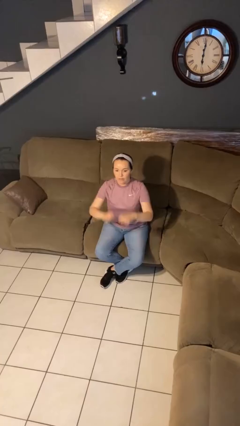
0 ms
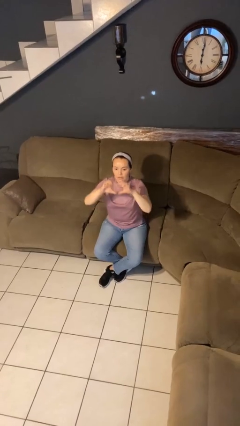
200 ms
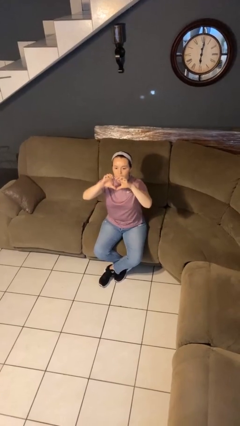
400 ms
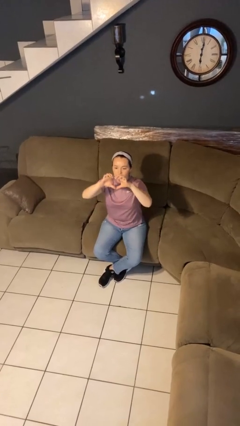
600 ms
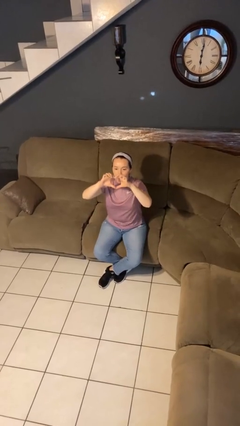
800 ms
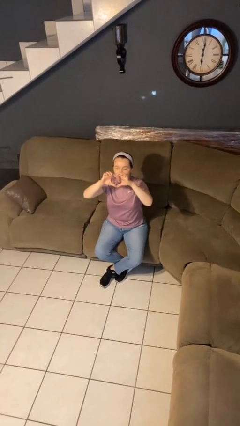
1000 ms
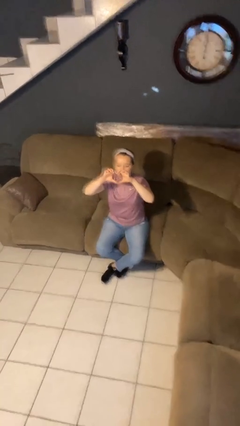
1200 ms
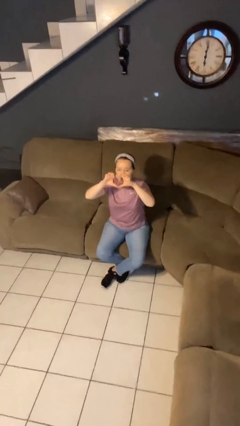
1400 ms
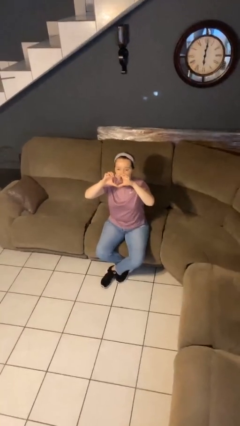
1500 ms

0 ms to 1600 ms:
person gestures heart

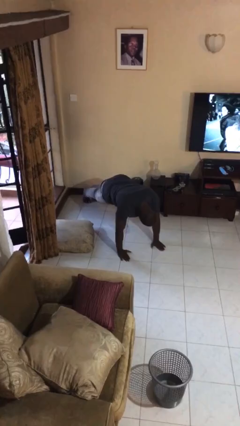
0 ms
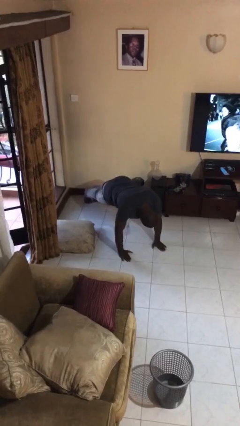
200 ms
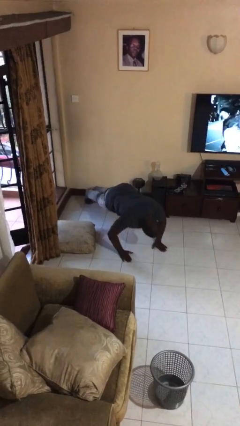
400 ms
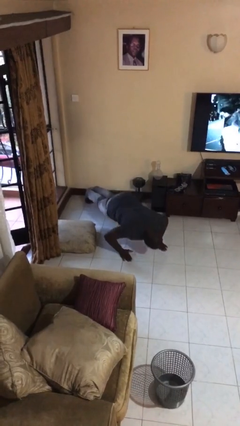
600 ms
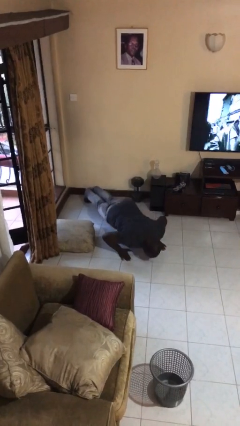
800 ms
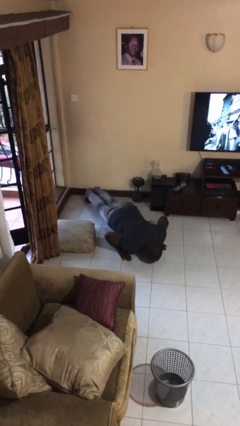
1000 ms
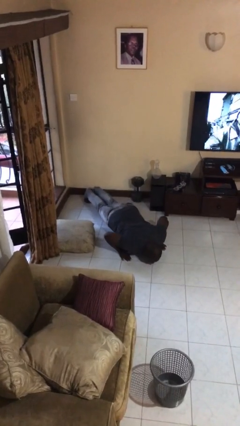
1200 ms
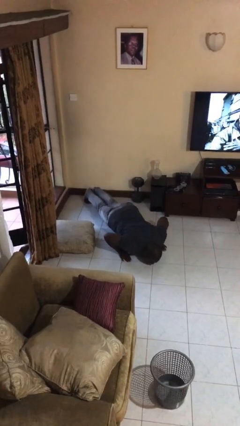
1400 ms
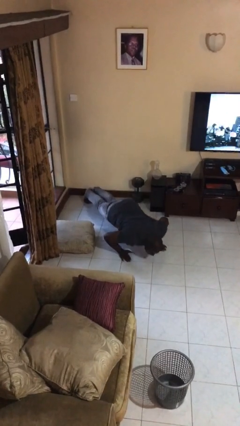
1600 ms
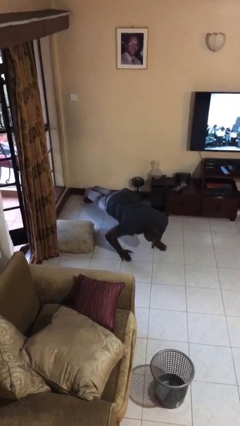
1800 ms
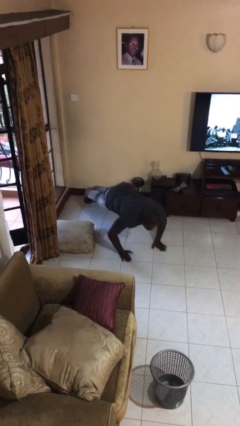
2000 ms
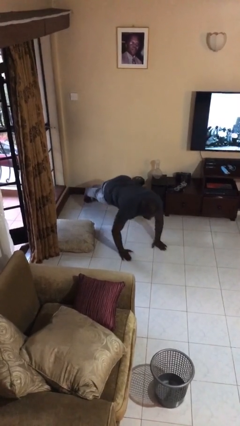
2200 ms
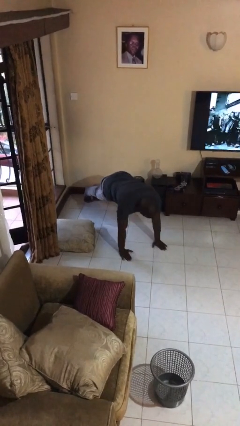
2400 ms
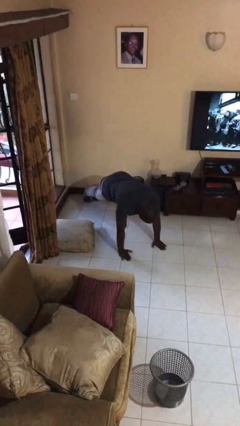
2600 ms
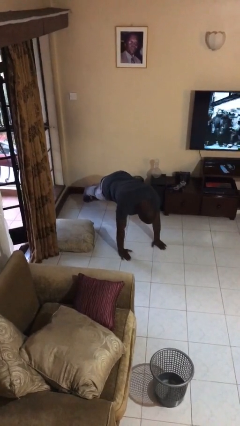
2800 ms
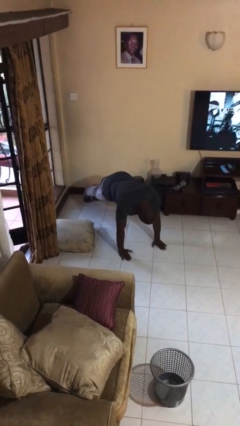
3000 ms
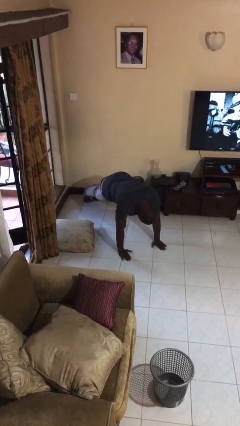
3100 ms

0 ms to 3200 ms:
person exercises with pushup

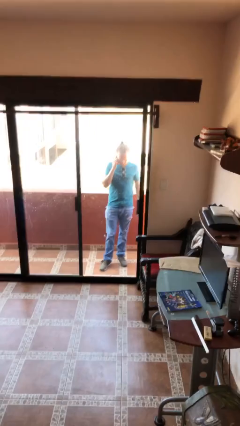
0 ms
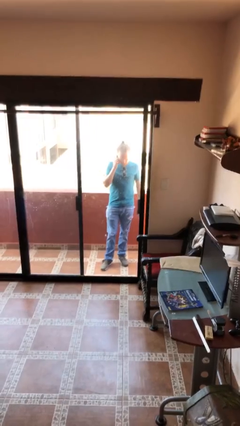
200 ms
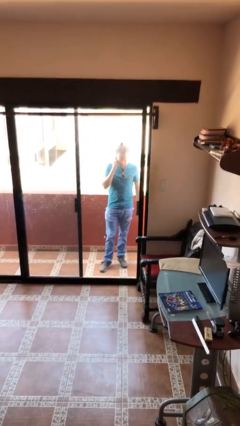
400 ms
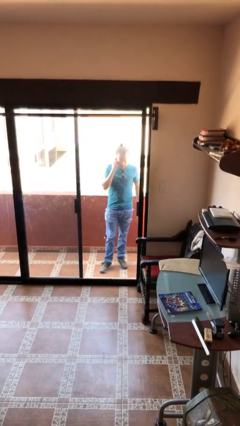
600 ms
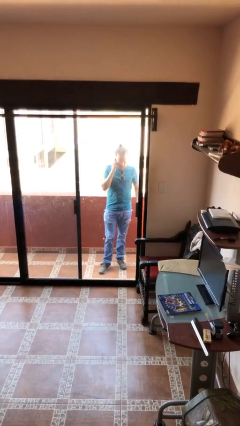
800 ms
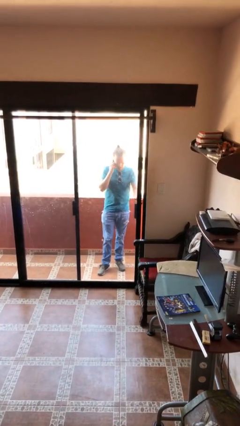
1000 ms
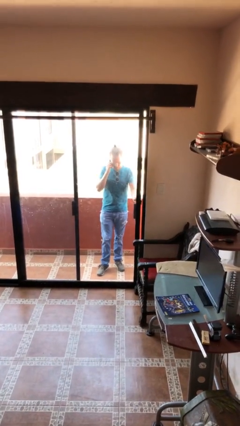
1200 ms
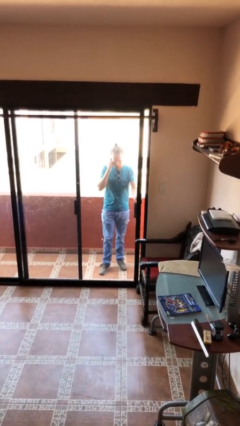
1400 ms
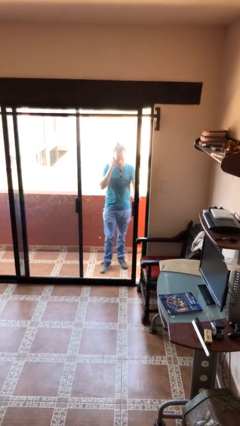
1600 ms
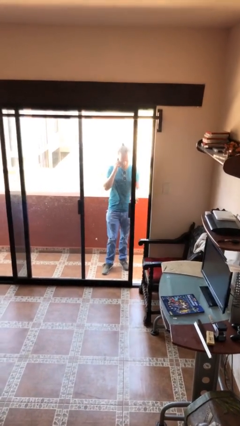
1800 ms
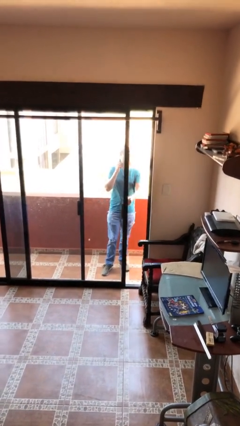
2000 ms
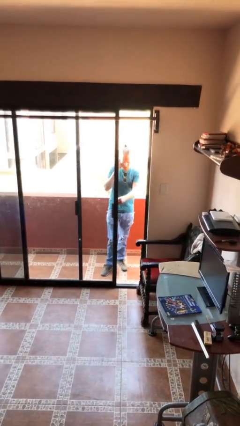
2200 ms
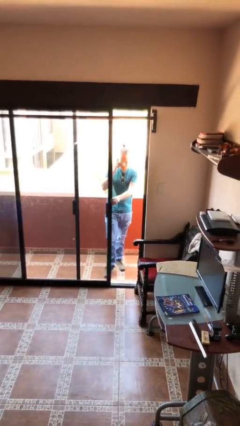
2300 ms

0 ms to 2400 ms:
person opens facility door

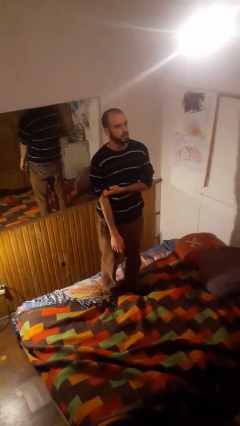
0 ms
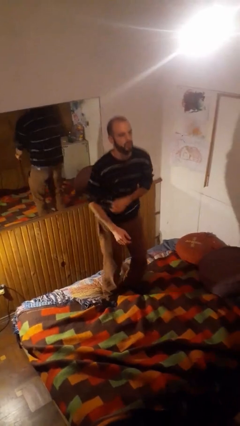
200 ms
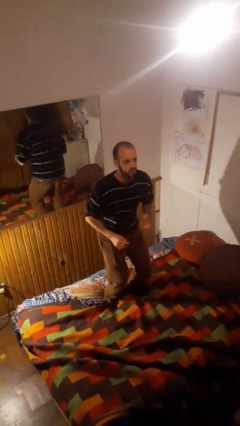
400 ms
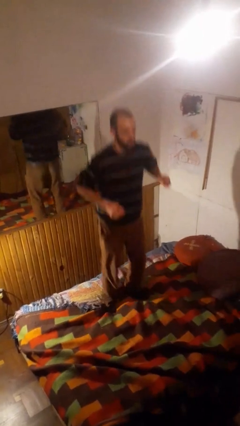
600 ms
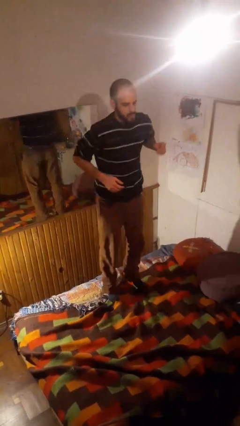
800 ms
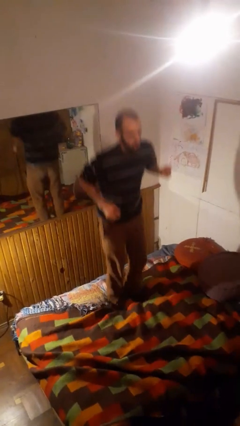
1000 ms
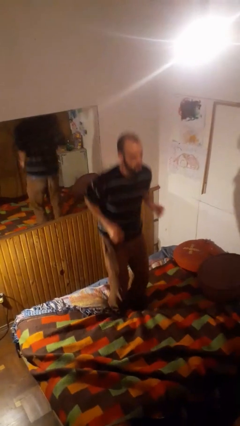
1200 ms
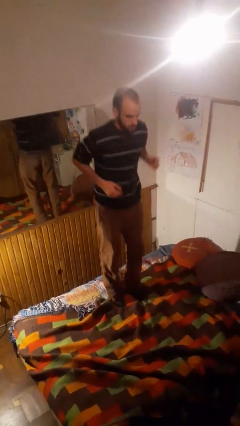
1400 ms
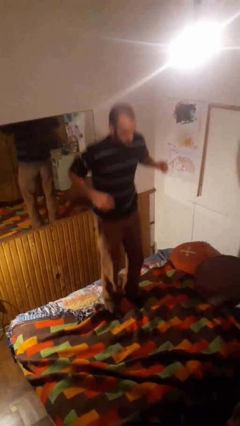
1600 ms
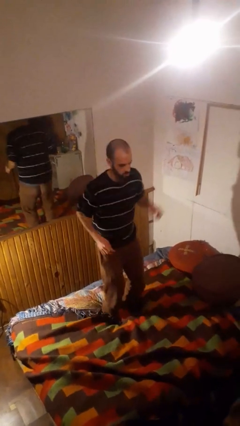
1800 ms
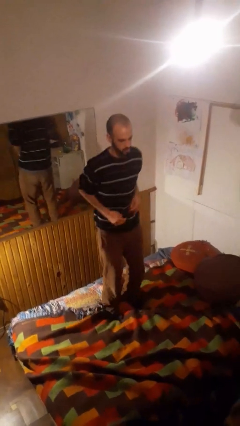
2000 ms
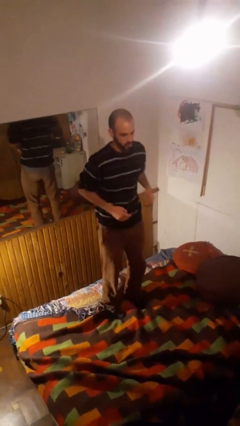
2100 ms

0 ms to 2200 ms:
person jumps on bed

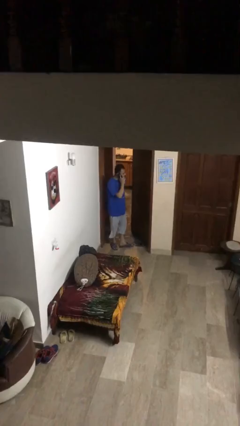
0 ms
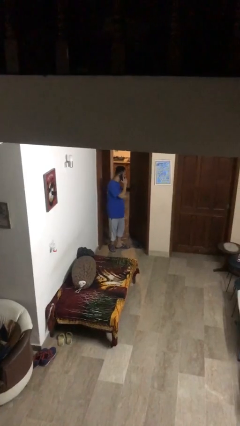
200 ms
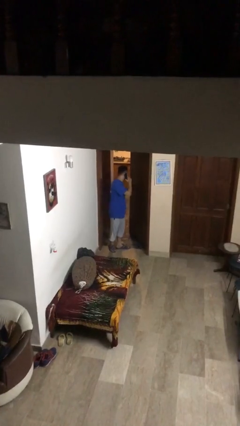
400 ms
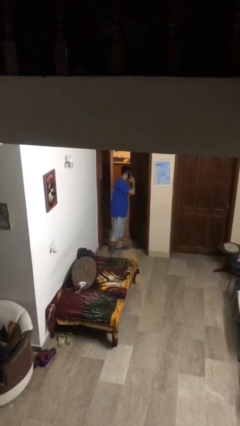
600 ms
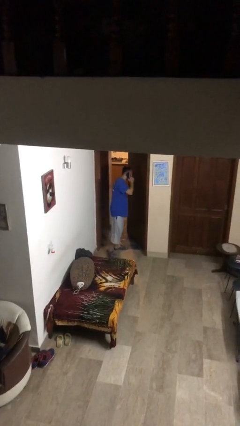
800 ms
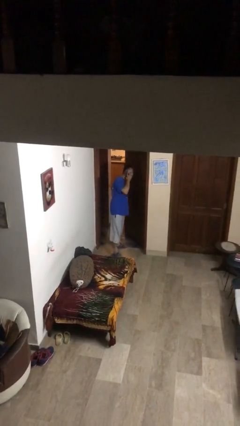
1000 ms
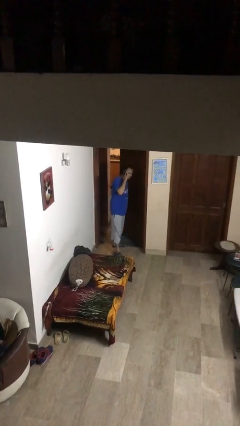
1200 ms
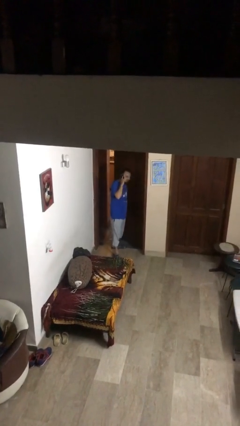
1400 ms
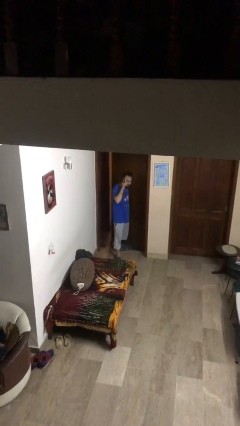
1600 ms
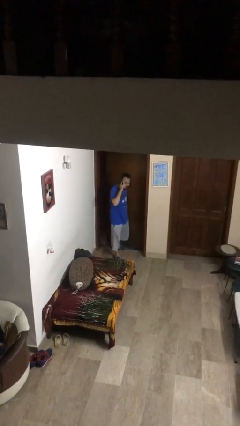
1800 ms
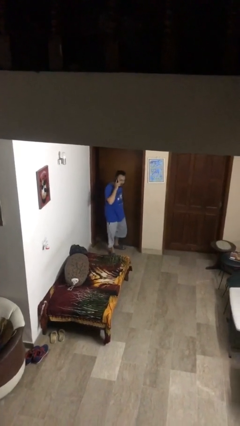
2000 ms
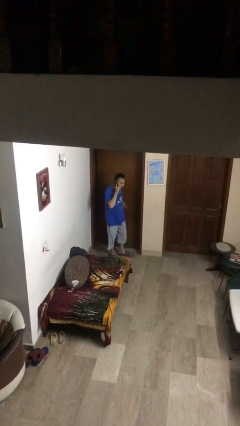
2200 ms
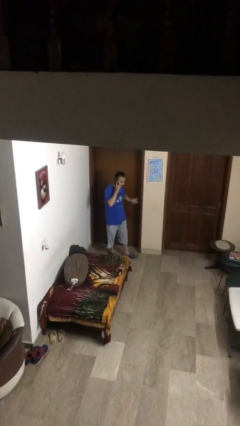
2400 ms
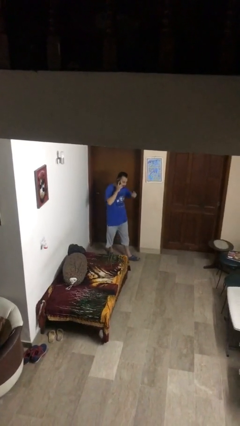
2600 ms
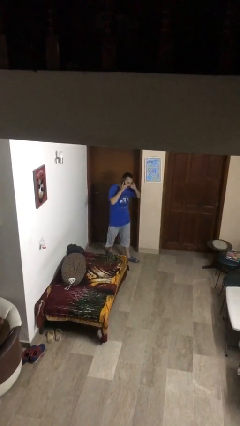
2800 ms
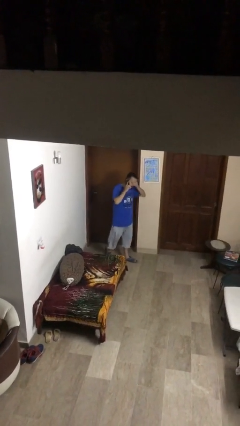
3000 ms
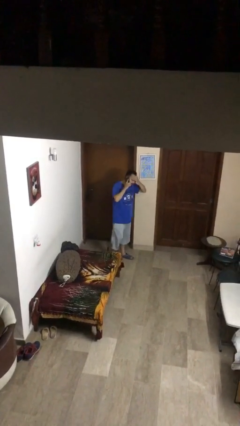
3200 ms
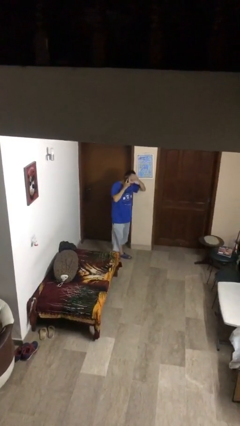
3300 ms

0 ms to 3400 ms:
person closes facility door

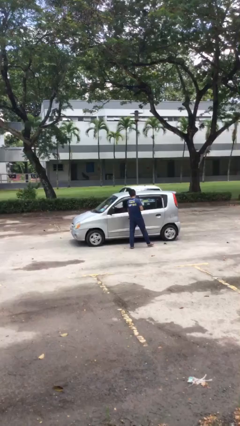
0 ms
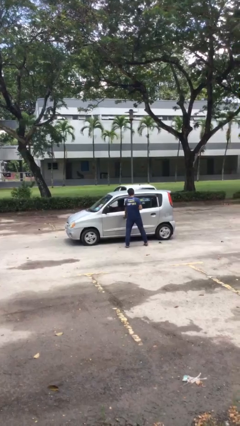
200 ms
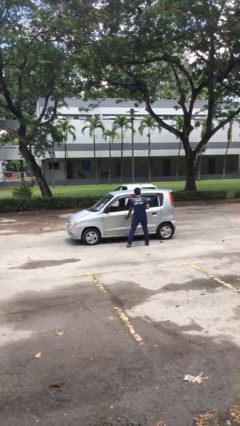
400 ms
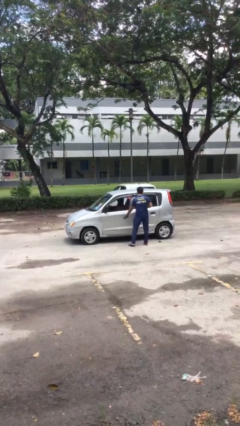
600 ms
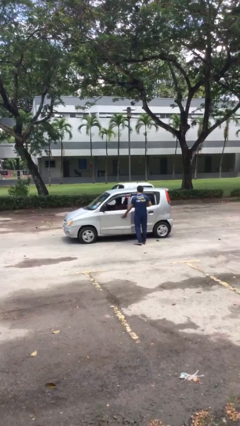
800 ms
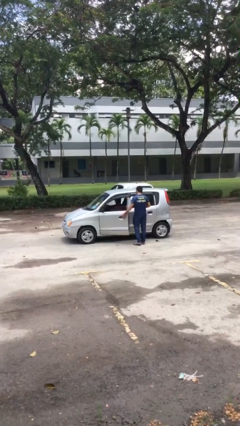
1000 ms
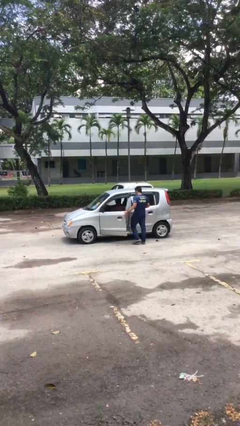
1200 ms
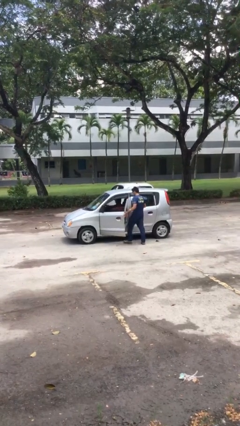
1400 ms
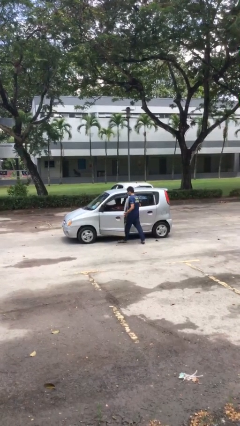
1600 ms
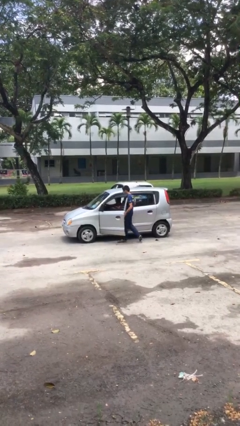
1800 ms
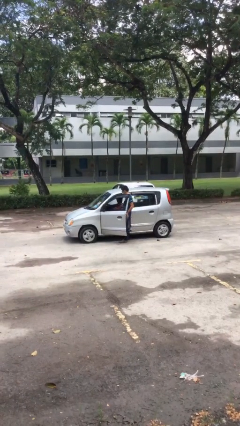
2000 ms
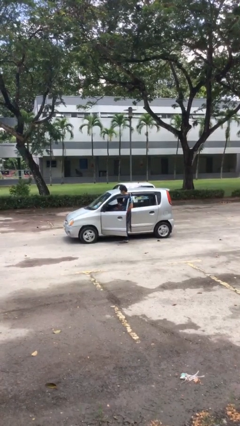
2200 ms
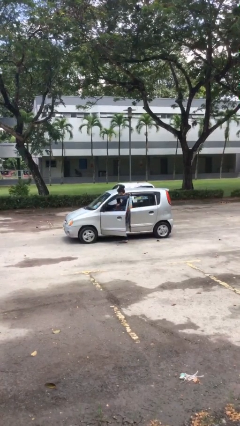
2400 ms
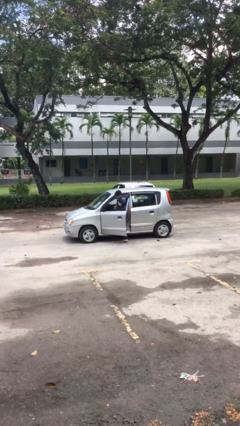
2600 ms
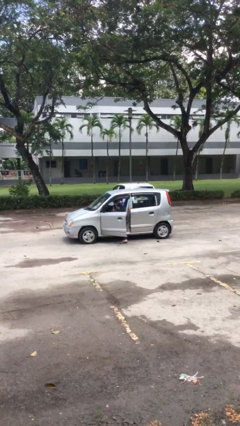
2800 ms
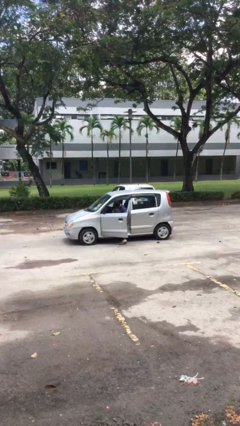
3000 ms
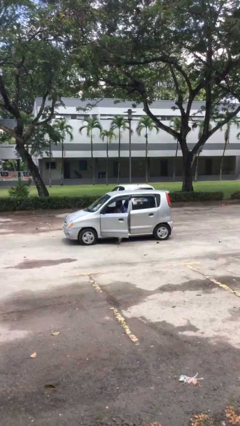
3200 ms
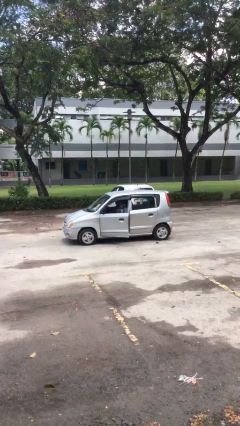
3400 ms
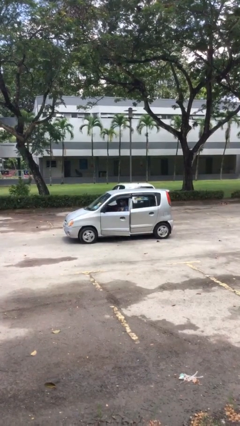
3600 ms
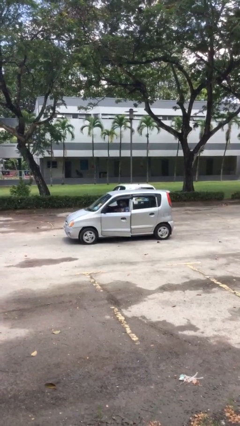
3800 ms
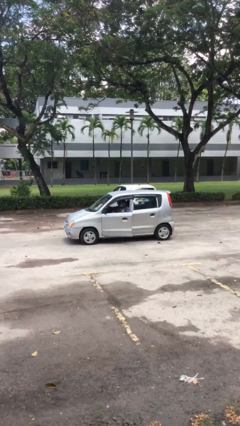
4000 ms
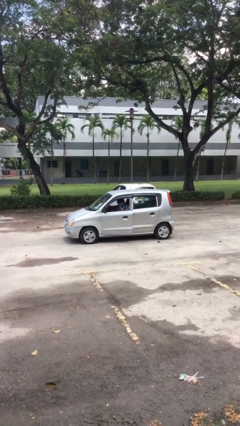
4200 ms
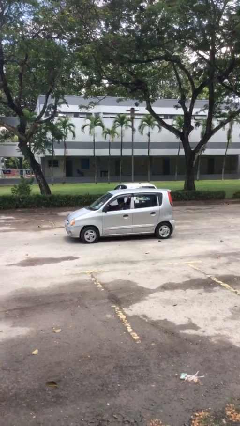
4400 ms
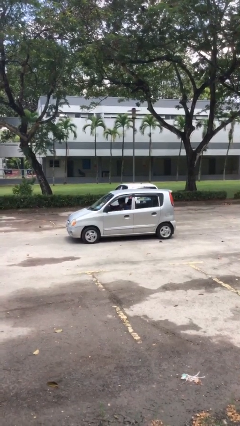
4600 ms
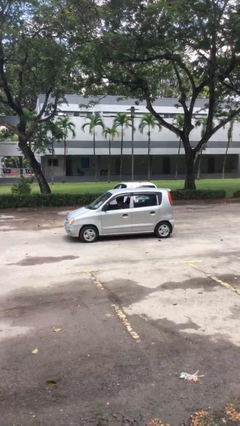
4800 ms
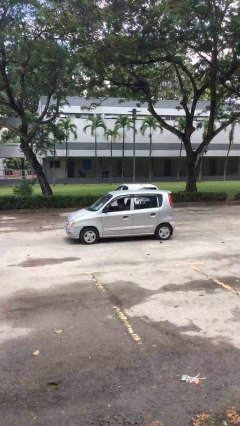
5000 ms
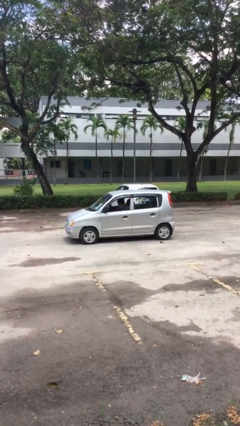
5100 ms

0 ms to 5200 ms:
car picks up person
